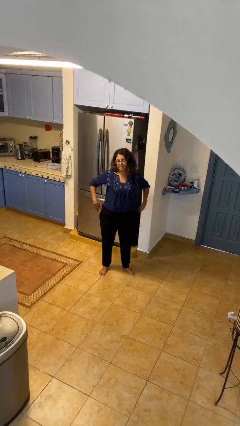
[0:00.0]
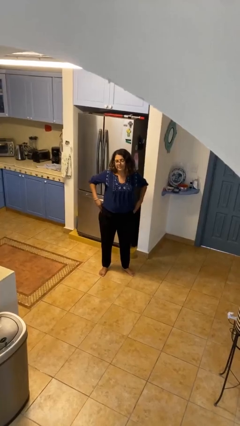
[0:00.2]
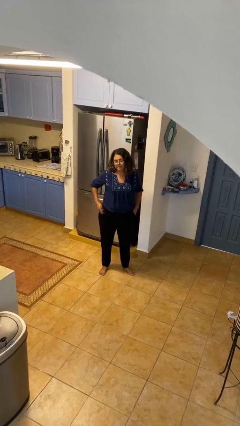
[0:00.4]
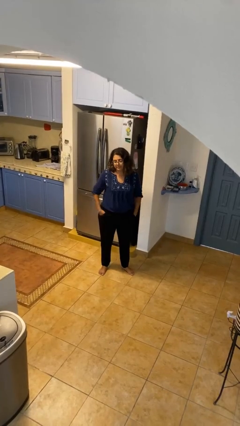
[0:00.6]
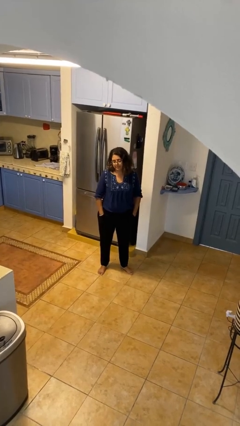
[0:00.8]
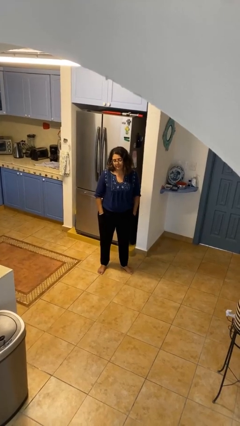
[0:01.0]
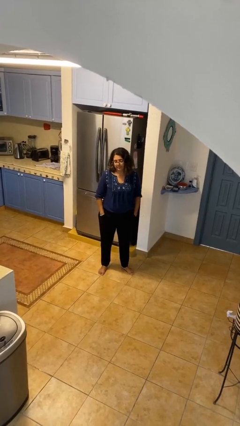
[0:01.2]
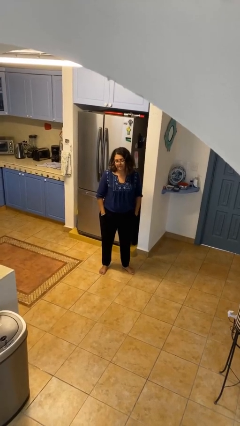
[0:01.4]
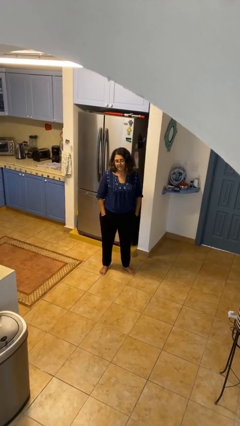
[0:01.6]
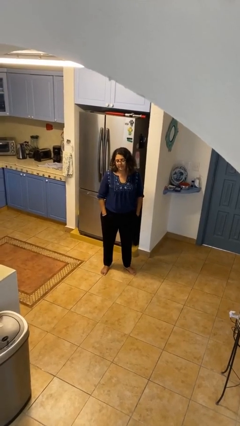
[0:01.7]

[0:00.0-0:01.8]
person puts hands in back pockets

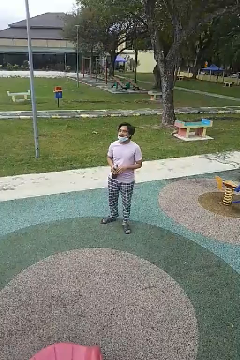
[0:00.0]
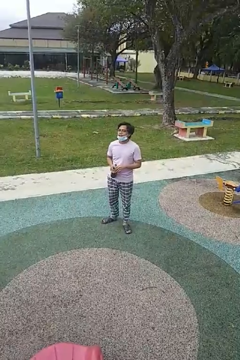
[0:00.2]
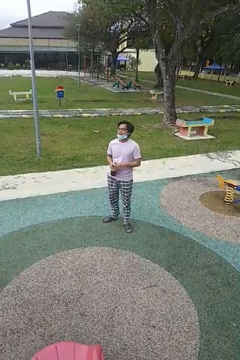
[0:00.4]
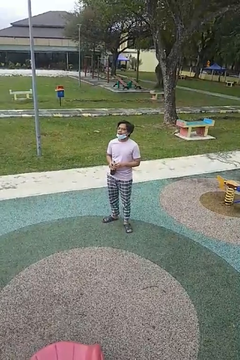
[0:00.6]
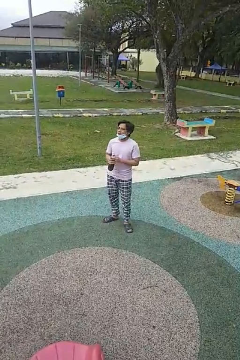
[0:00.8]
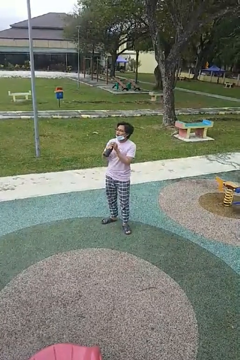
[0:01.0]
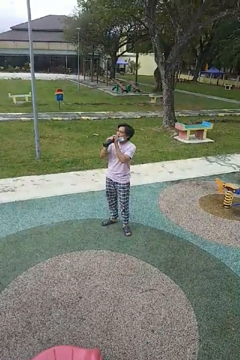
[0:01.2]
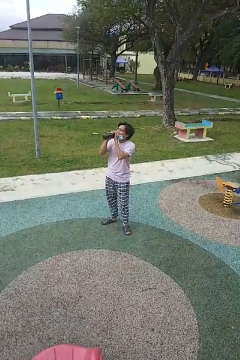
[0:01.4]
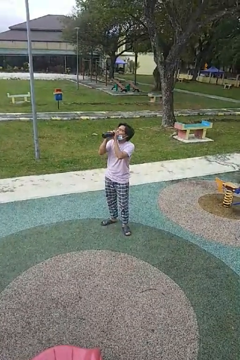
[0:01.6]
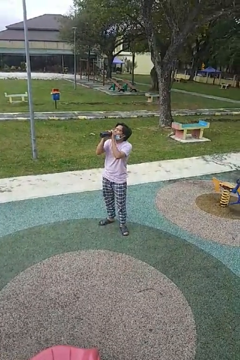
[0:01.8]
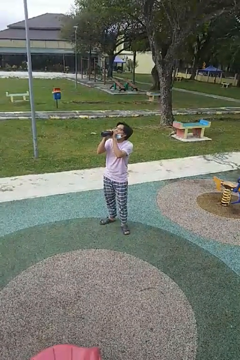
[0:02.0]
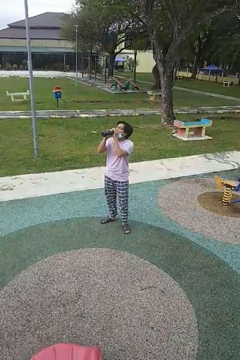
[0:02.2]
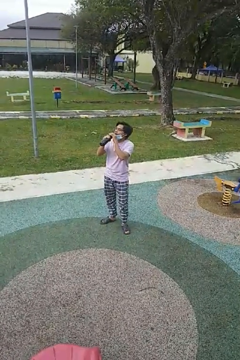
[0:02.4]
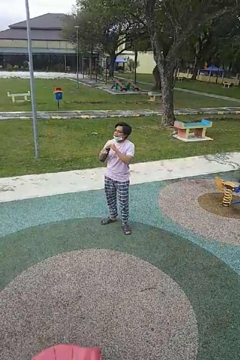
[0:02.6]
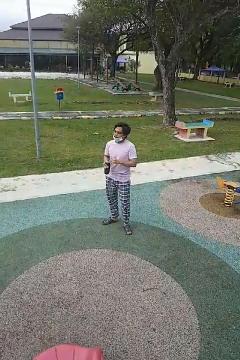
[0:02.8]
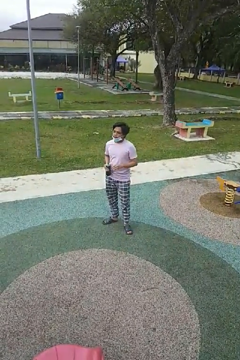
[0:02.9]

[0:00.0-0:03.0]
person drinks from bottle

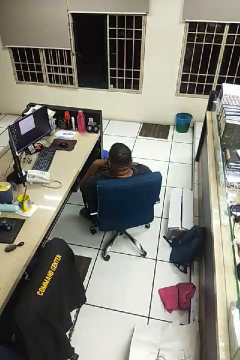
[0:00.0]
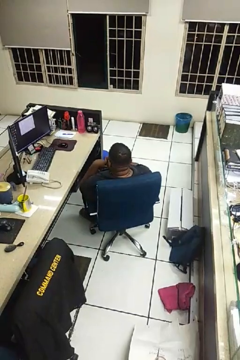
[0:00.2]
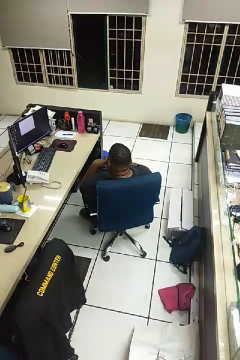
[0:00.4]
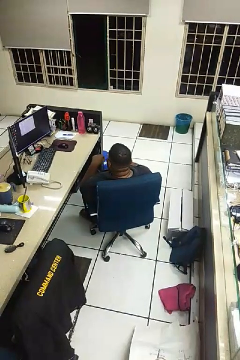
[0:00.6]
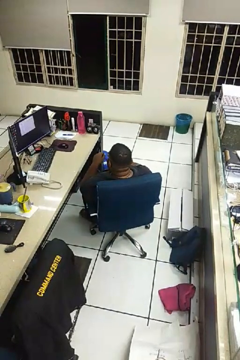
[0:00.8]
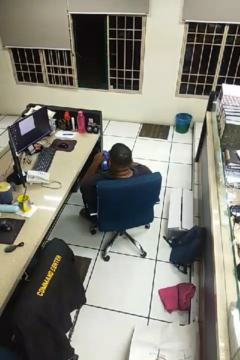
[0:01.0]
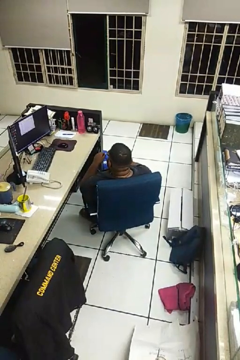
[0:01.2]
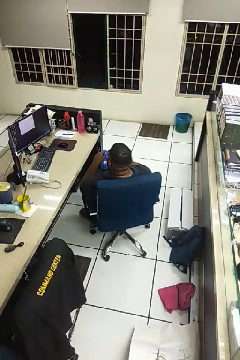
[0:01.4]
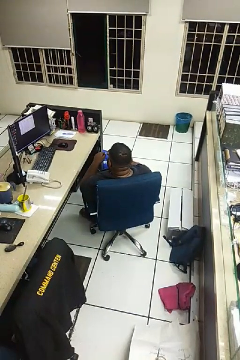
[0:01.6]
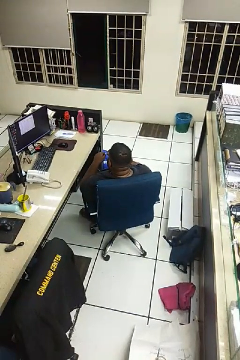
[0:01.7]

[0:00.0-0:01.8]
person paints fingernails

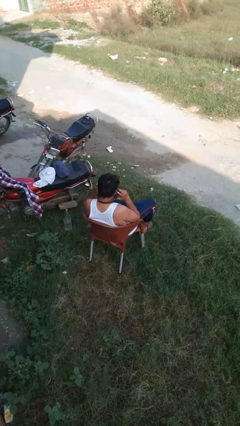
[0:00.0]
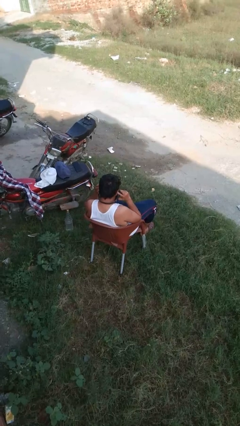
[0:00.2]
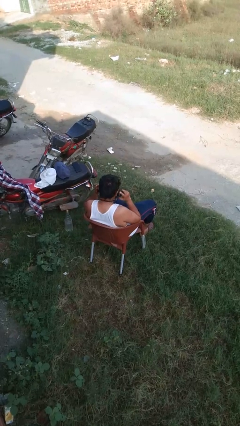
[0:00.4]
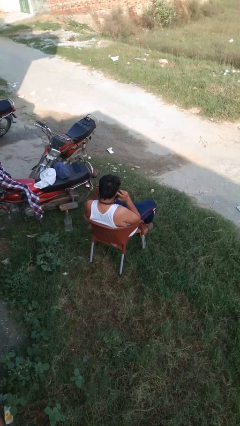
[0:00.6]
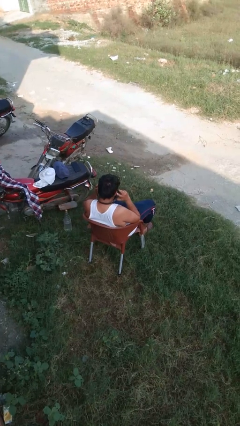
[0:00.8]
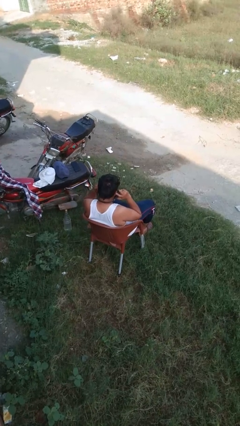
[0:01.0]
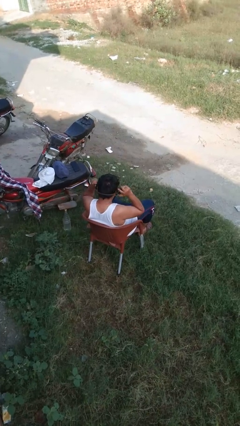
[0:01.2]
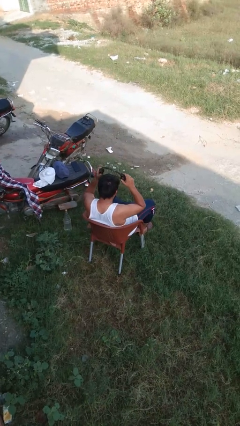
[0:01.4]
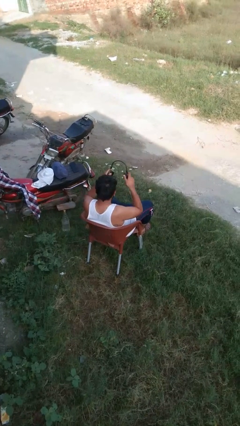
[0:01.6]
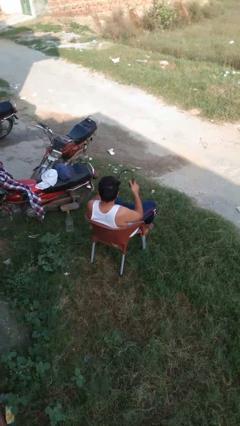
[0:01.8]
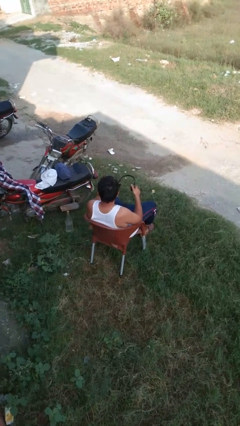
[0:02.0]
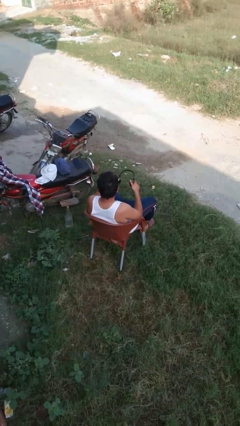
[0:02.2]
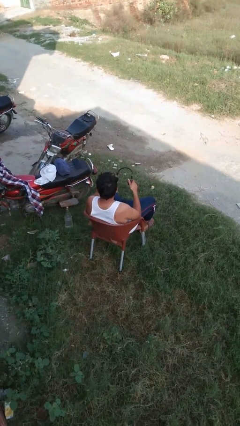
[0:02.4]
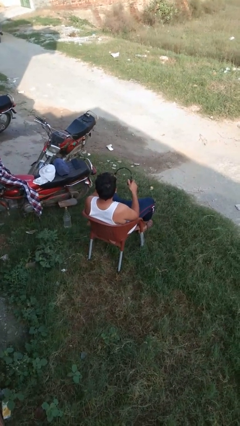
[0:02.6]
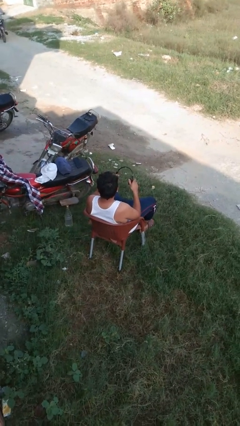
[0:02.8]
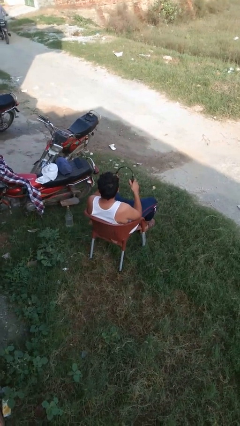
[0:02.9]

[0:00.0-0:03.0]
person takes off headphones

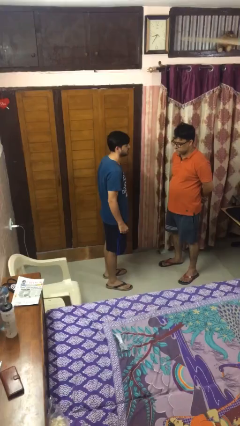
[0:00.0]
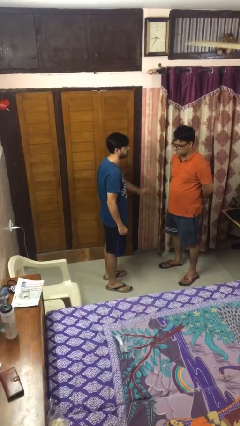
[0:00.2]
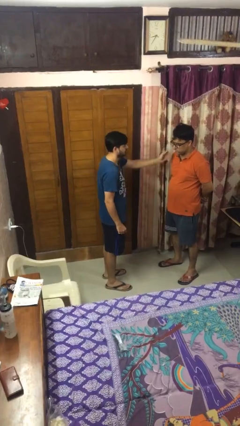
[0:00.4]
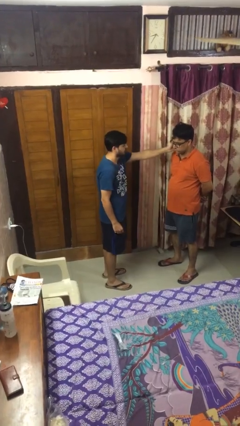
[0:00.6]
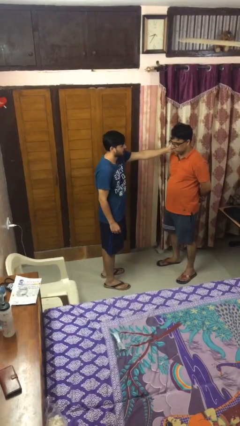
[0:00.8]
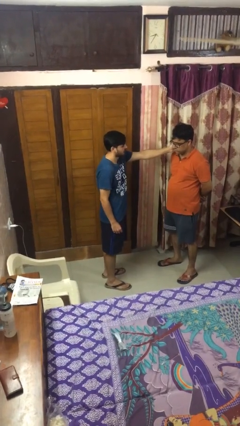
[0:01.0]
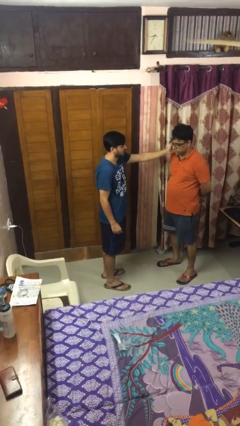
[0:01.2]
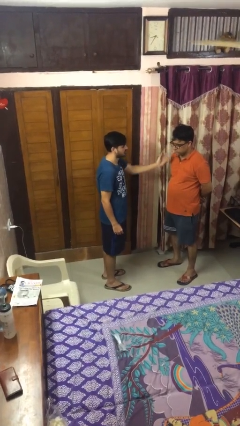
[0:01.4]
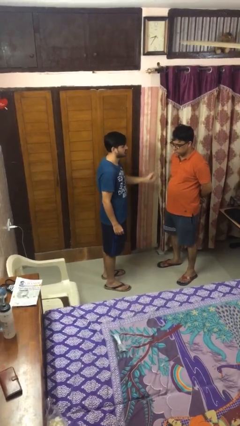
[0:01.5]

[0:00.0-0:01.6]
person touches face of person

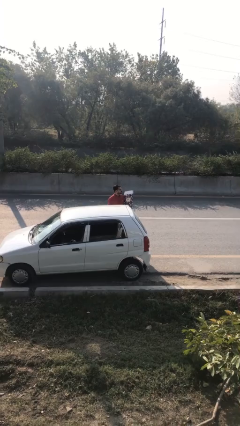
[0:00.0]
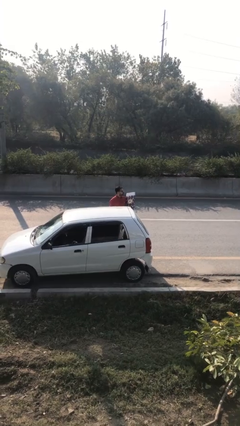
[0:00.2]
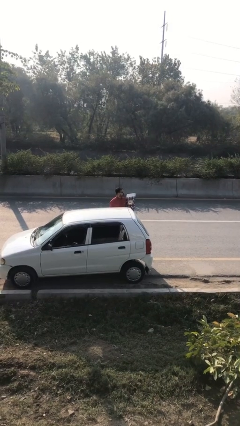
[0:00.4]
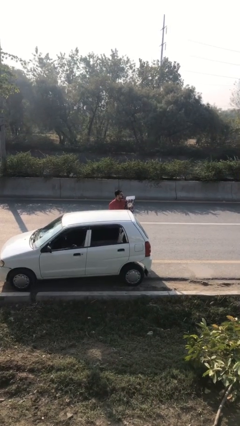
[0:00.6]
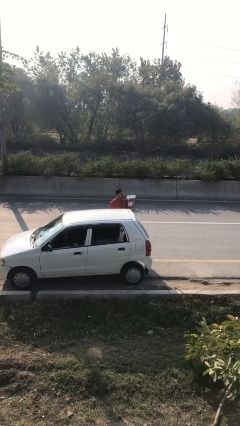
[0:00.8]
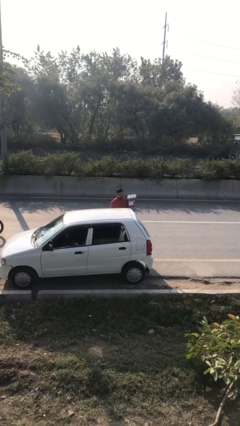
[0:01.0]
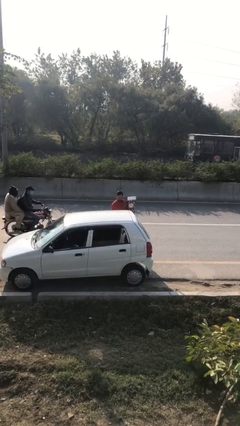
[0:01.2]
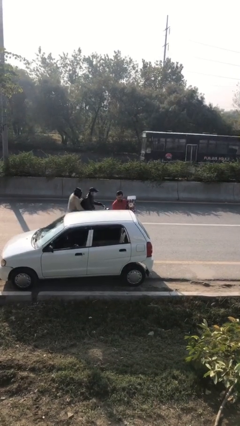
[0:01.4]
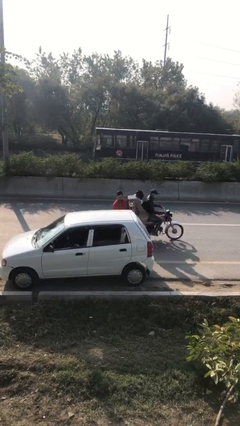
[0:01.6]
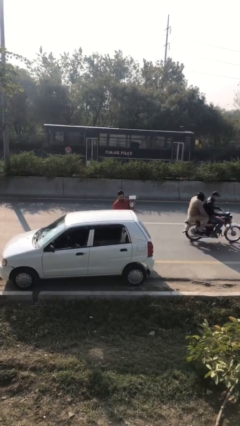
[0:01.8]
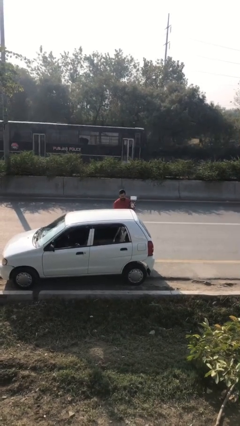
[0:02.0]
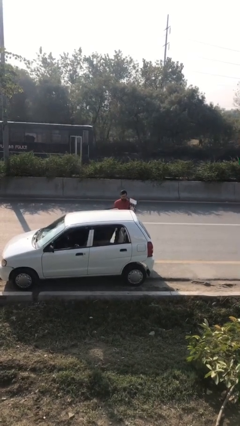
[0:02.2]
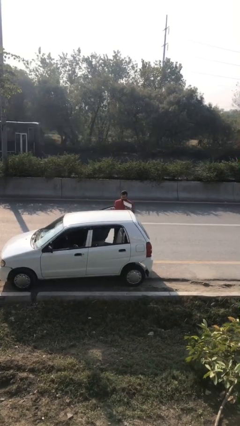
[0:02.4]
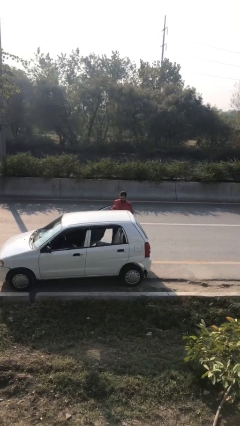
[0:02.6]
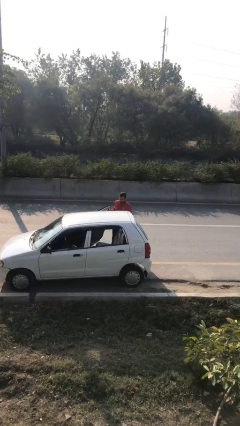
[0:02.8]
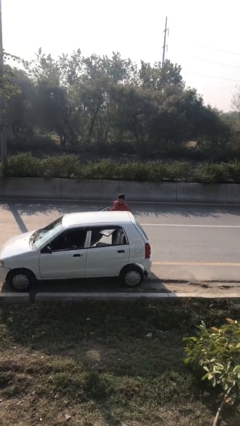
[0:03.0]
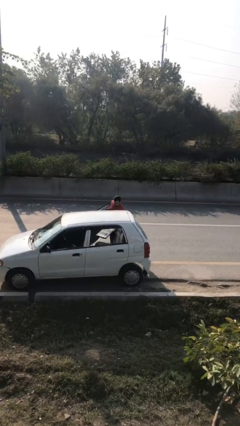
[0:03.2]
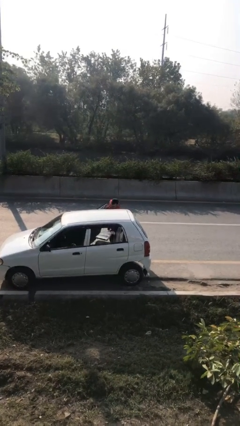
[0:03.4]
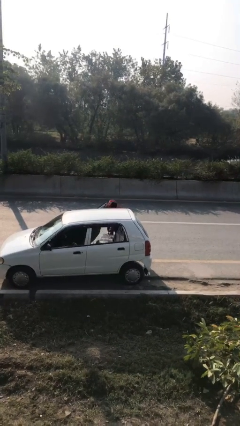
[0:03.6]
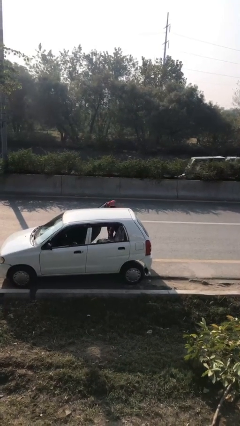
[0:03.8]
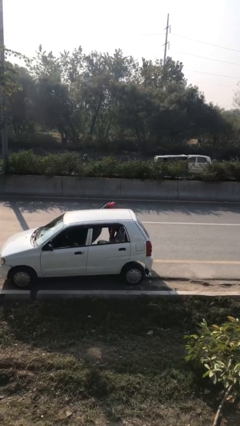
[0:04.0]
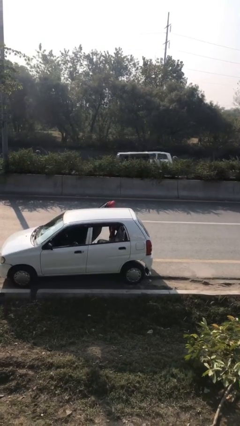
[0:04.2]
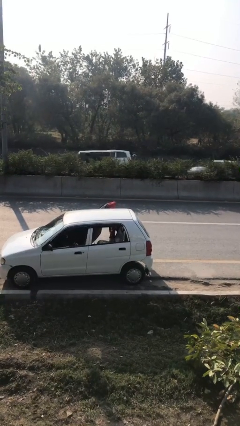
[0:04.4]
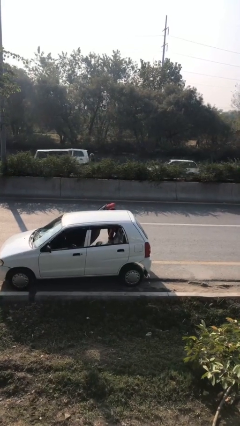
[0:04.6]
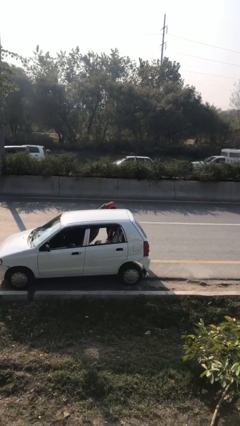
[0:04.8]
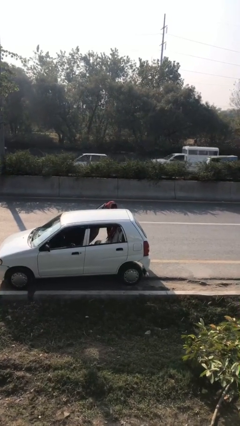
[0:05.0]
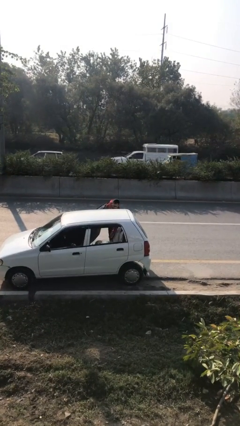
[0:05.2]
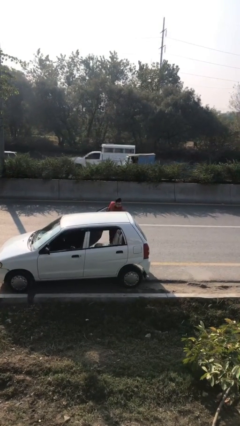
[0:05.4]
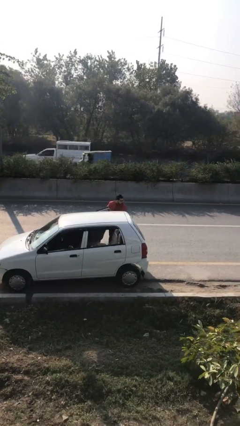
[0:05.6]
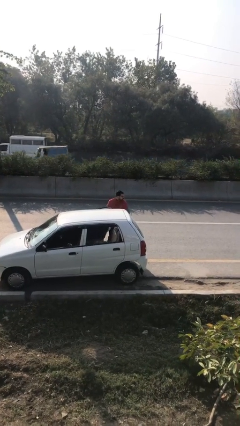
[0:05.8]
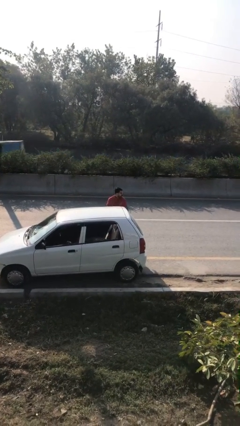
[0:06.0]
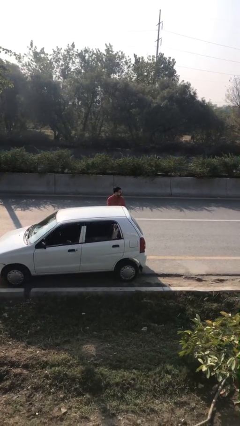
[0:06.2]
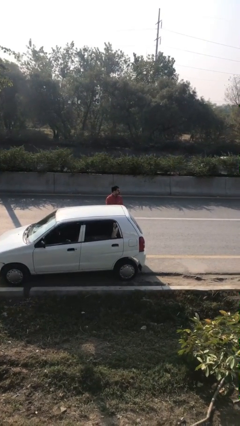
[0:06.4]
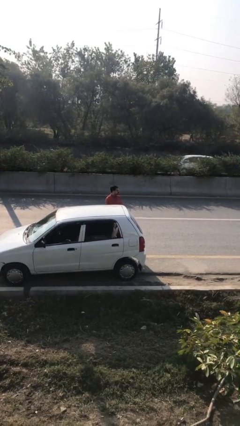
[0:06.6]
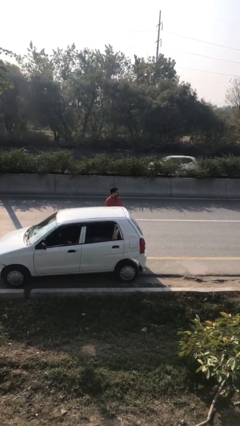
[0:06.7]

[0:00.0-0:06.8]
person loads car
